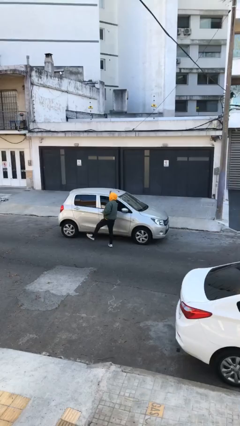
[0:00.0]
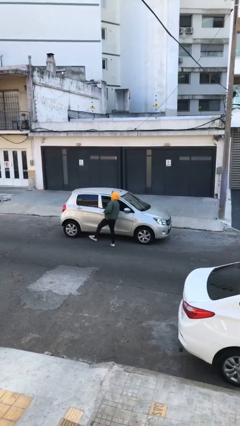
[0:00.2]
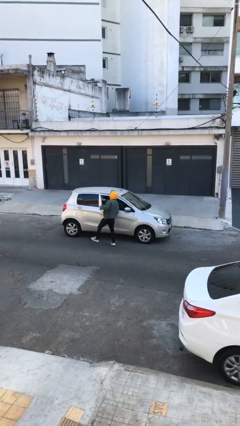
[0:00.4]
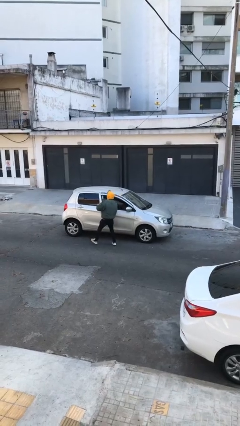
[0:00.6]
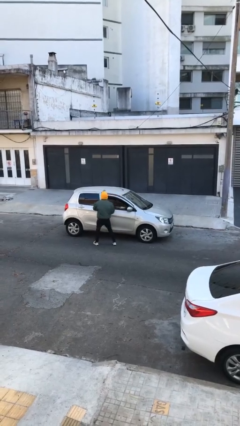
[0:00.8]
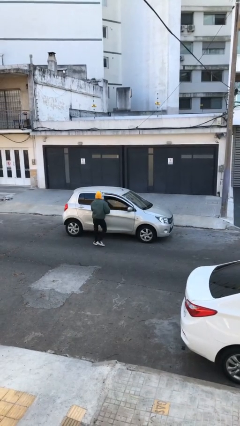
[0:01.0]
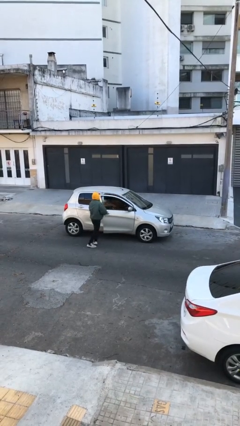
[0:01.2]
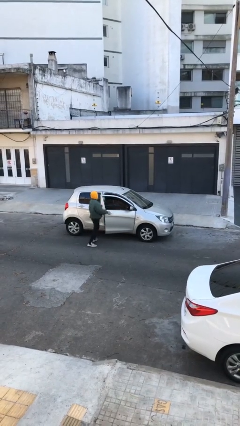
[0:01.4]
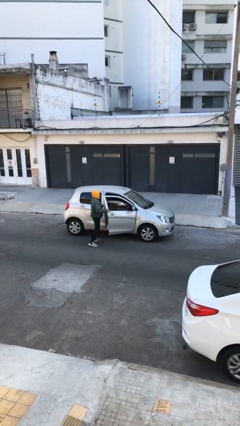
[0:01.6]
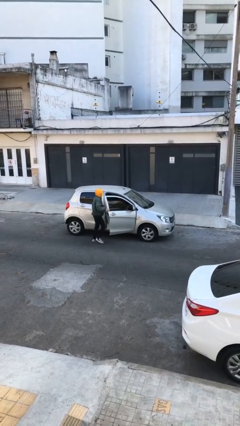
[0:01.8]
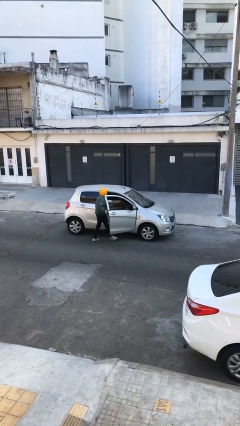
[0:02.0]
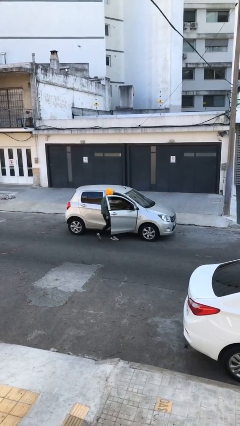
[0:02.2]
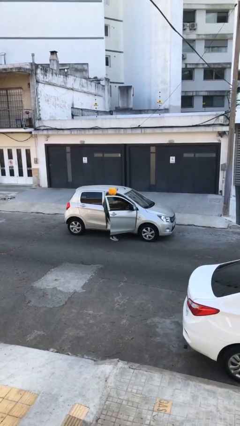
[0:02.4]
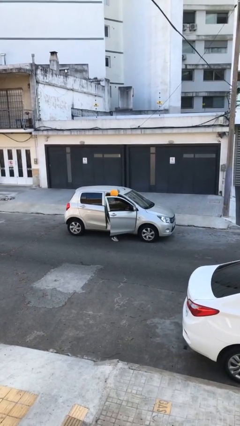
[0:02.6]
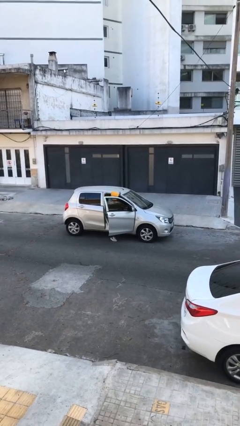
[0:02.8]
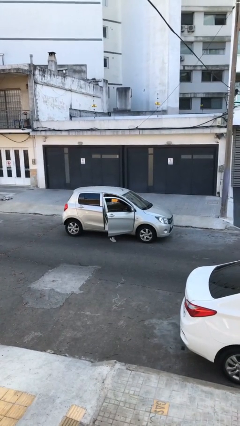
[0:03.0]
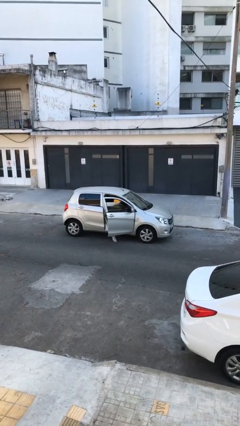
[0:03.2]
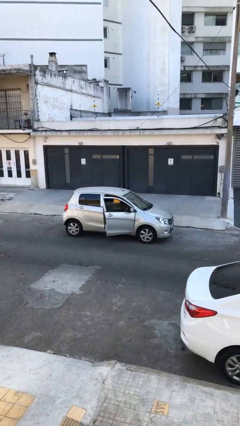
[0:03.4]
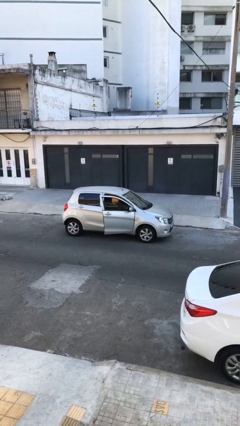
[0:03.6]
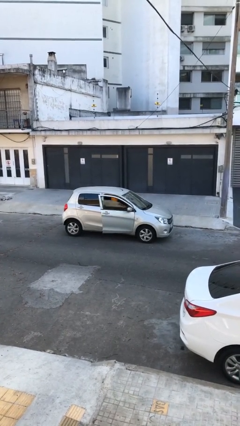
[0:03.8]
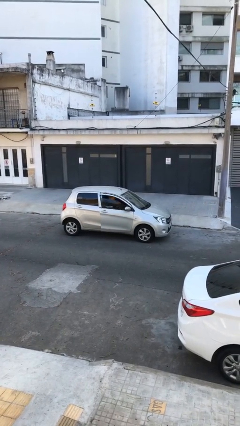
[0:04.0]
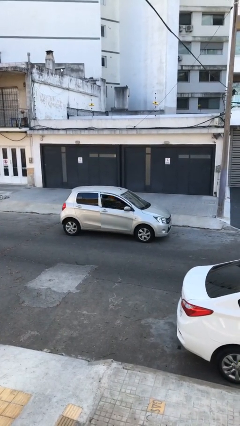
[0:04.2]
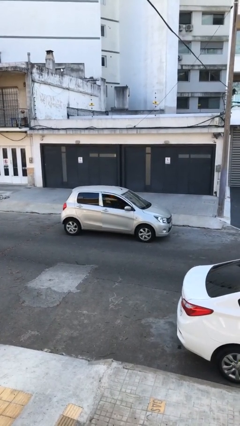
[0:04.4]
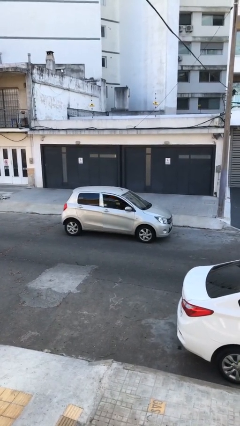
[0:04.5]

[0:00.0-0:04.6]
car picks up person

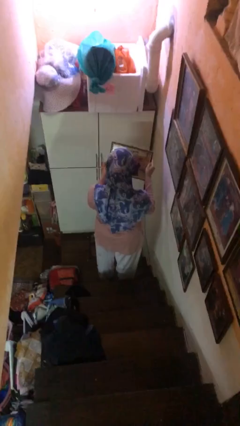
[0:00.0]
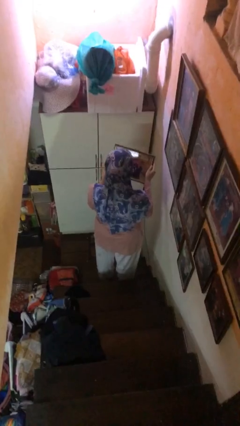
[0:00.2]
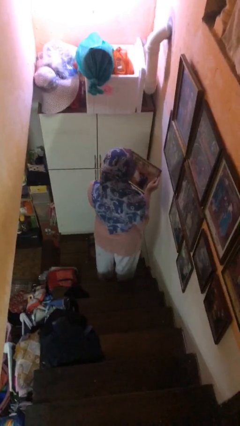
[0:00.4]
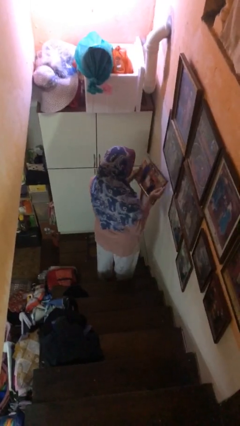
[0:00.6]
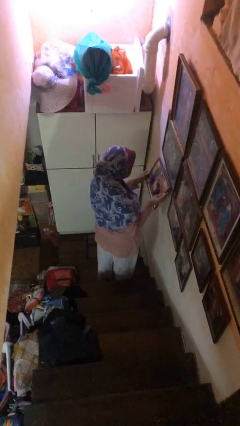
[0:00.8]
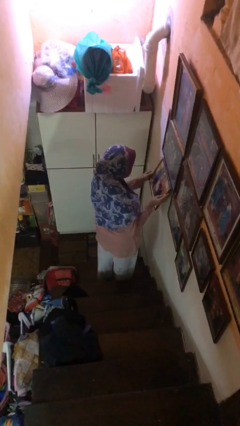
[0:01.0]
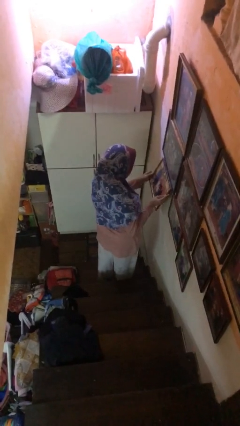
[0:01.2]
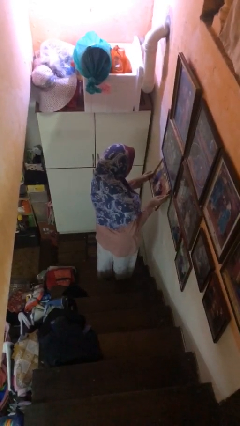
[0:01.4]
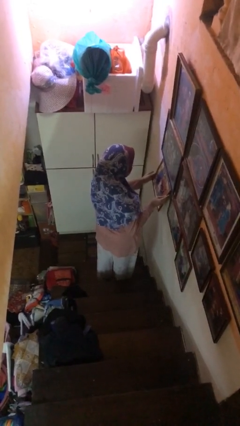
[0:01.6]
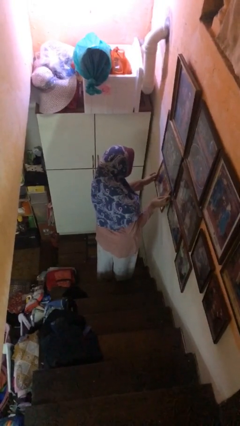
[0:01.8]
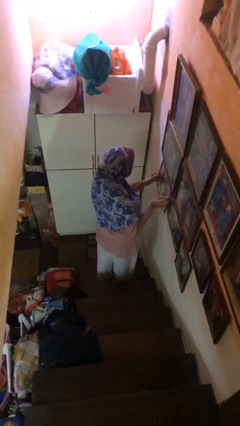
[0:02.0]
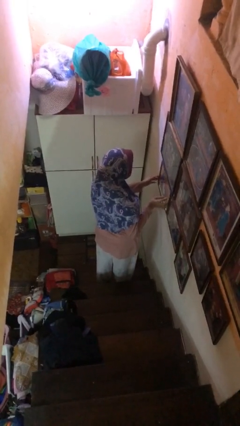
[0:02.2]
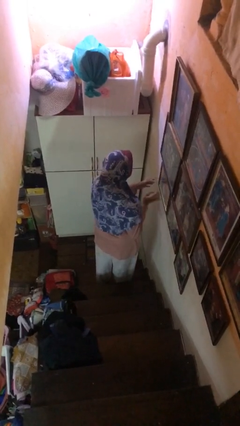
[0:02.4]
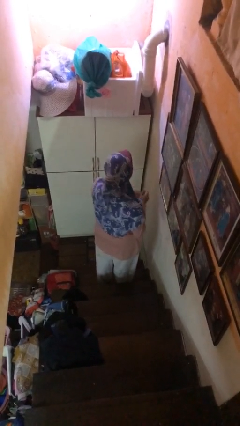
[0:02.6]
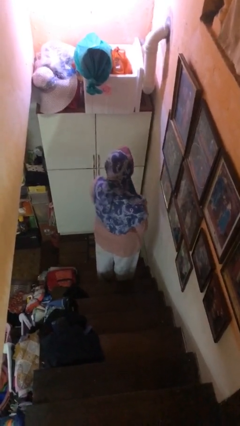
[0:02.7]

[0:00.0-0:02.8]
person takes down picture frame

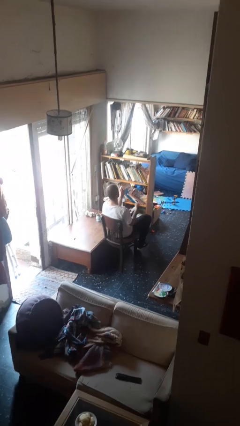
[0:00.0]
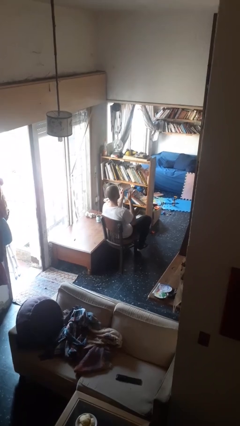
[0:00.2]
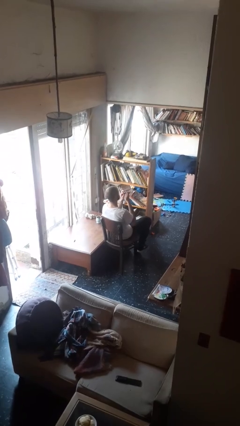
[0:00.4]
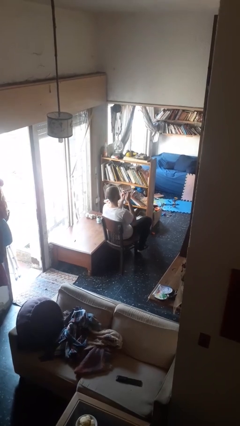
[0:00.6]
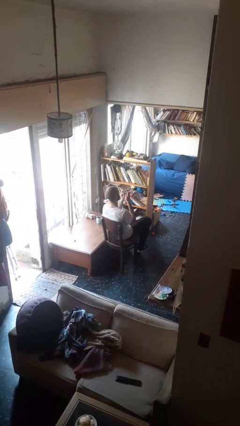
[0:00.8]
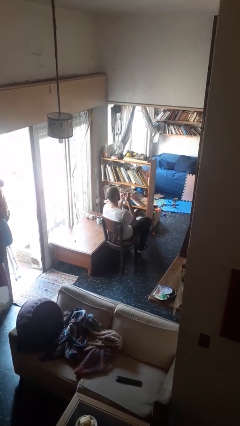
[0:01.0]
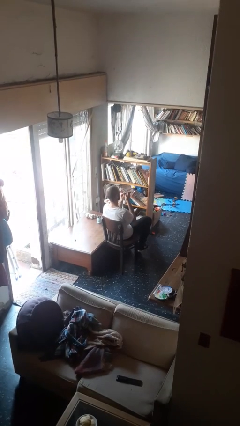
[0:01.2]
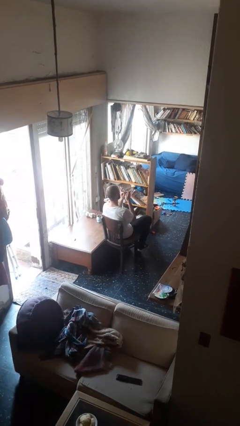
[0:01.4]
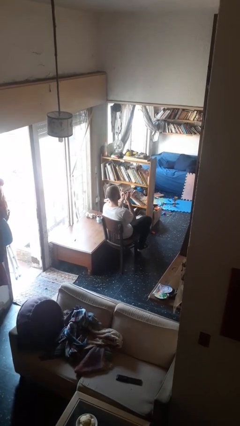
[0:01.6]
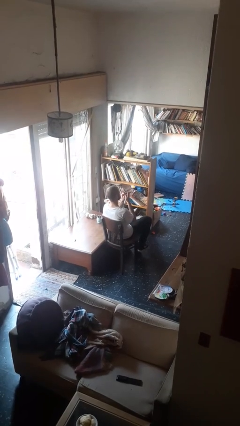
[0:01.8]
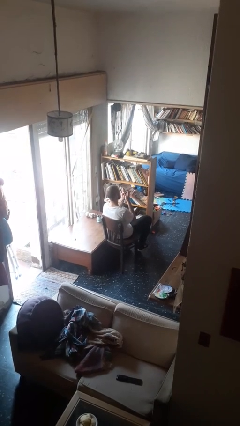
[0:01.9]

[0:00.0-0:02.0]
person files fingernails

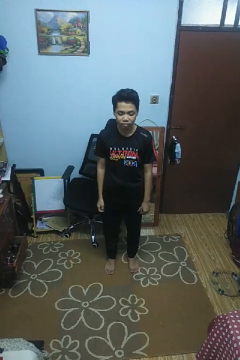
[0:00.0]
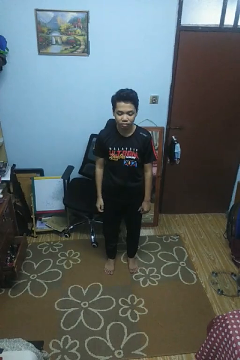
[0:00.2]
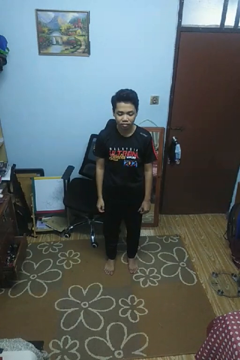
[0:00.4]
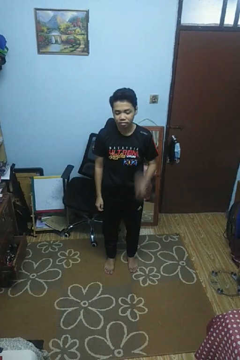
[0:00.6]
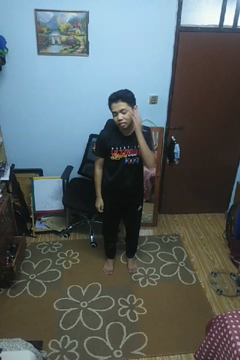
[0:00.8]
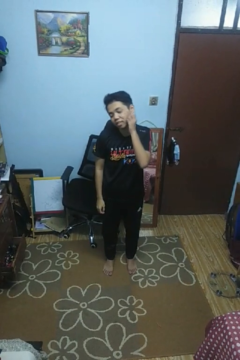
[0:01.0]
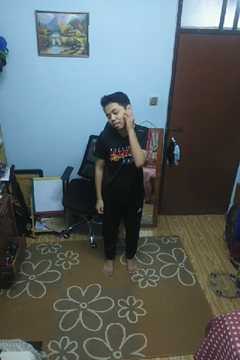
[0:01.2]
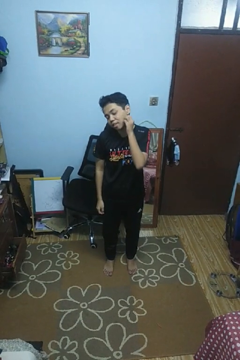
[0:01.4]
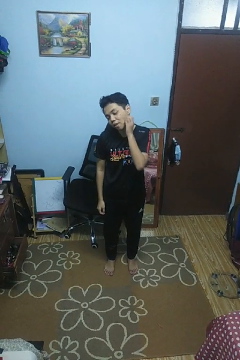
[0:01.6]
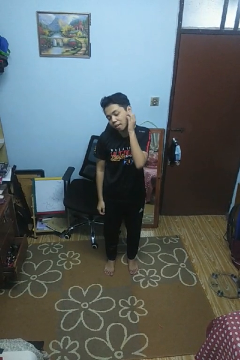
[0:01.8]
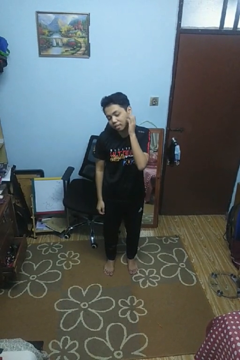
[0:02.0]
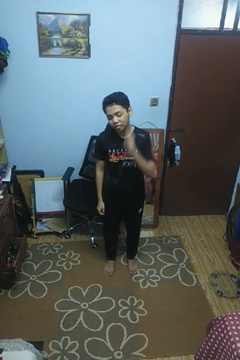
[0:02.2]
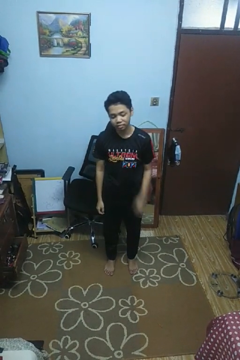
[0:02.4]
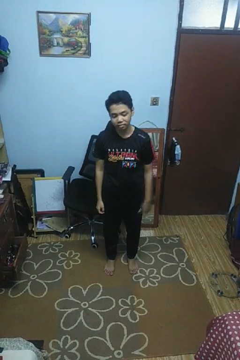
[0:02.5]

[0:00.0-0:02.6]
person scratches face

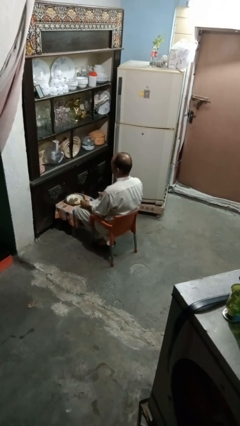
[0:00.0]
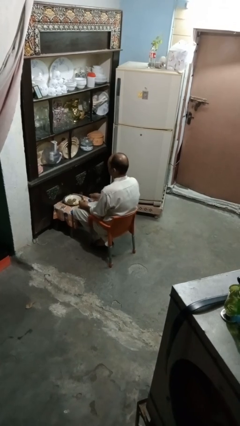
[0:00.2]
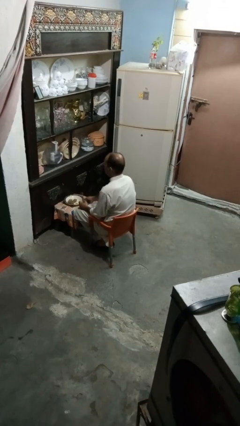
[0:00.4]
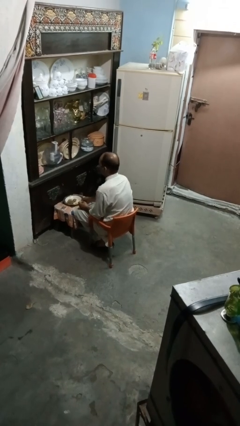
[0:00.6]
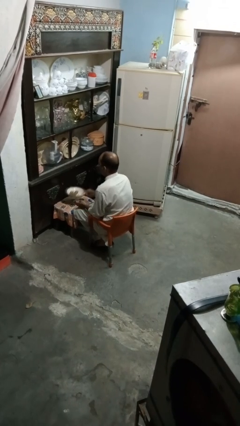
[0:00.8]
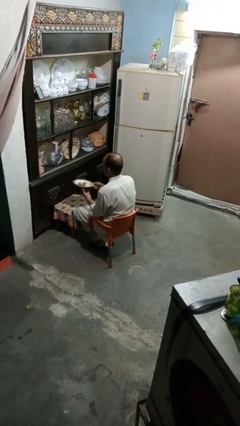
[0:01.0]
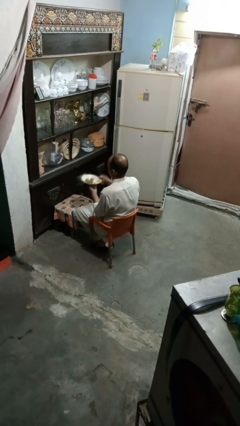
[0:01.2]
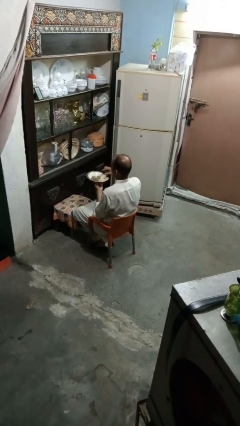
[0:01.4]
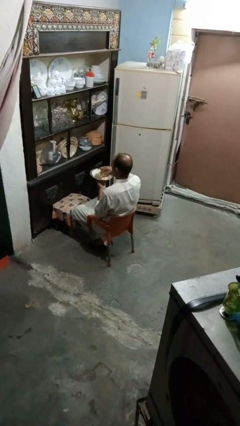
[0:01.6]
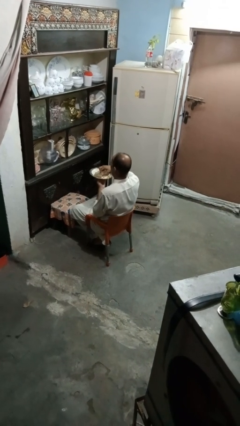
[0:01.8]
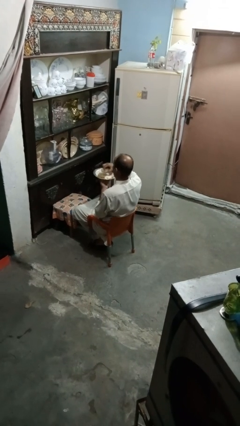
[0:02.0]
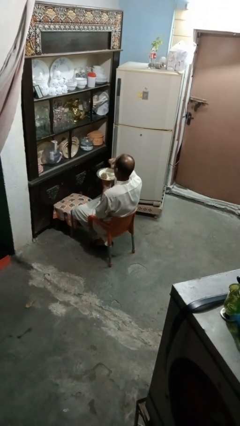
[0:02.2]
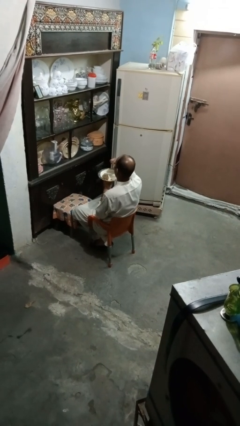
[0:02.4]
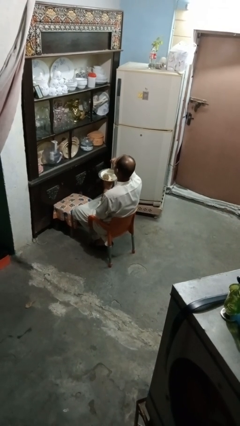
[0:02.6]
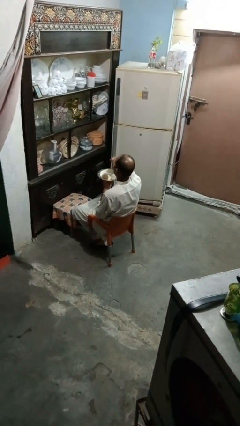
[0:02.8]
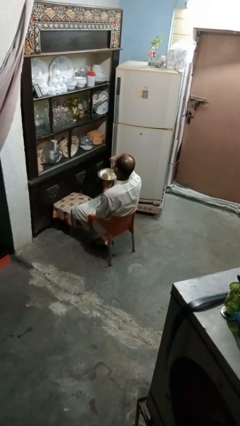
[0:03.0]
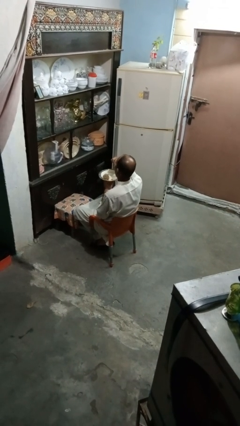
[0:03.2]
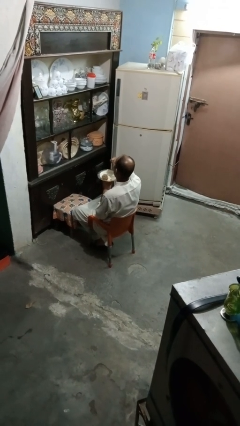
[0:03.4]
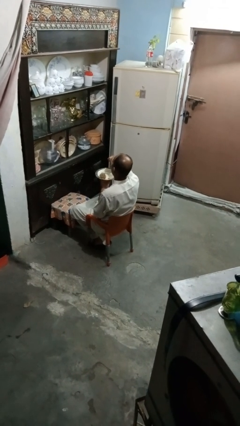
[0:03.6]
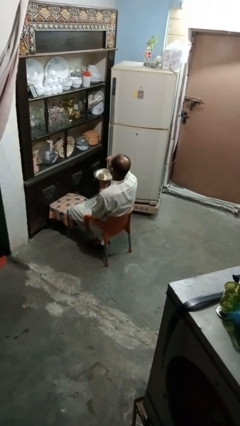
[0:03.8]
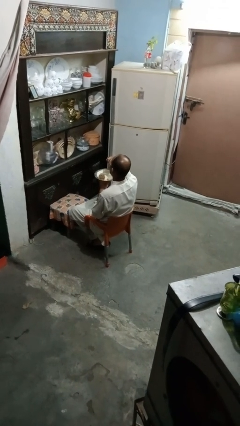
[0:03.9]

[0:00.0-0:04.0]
person eats with hands

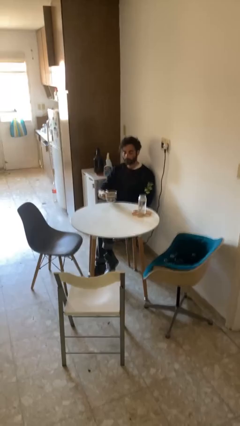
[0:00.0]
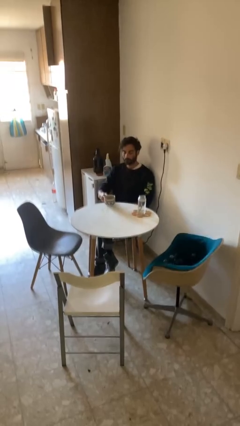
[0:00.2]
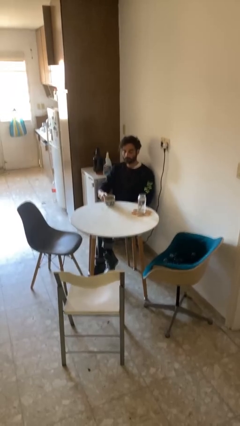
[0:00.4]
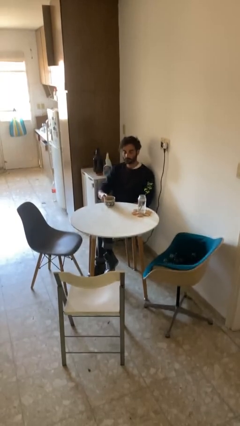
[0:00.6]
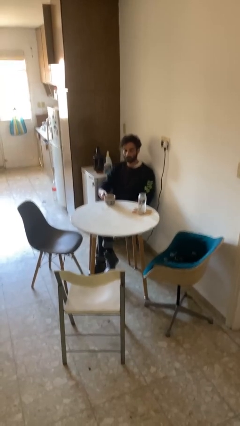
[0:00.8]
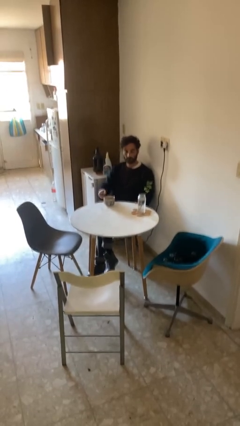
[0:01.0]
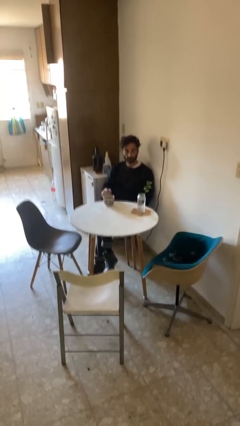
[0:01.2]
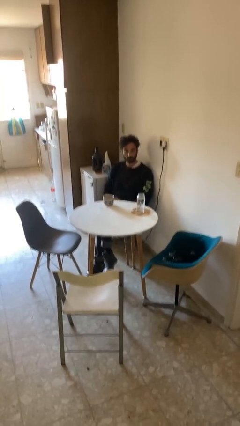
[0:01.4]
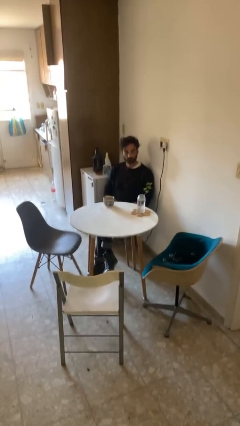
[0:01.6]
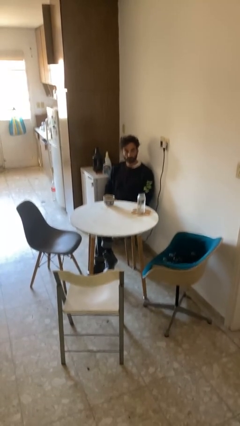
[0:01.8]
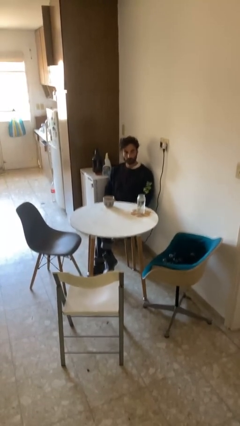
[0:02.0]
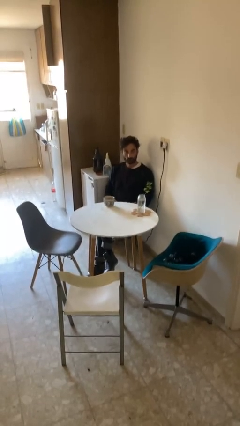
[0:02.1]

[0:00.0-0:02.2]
person puts down object on table
